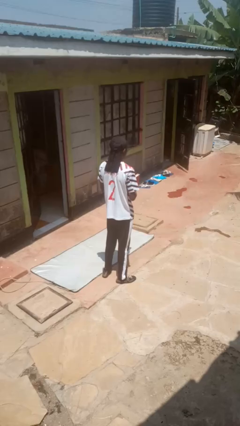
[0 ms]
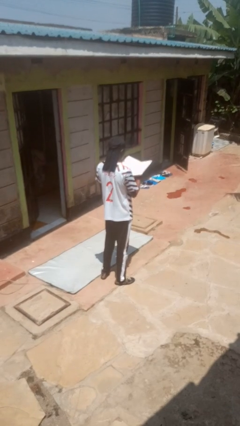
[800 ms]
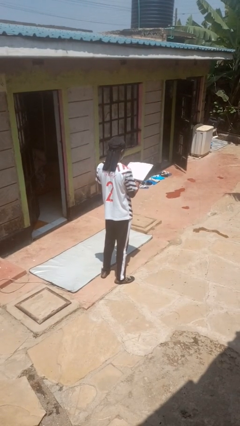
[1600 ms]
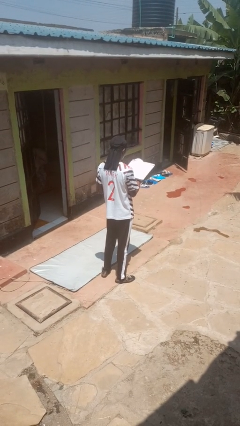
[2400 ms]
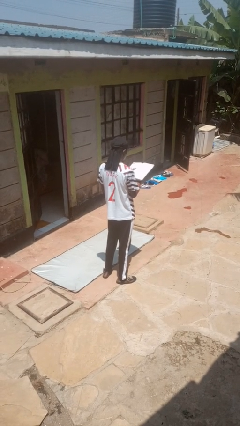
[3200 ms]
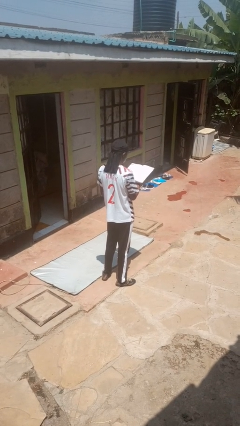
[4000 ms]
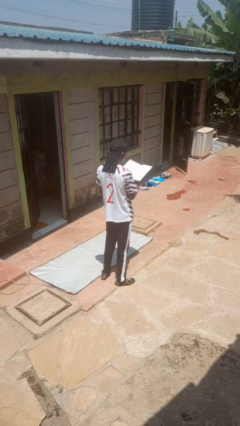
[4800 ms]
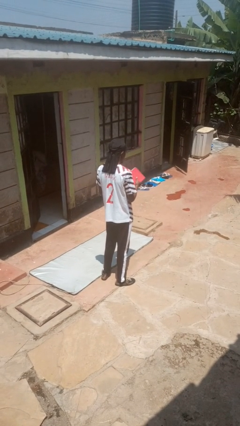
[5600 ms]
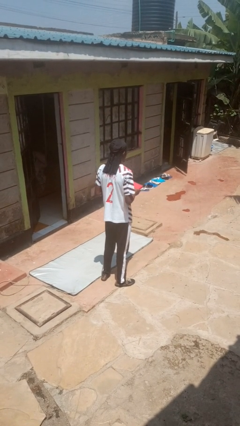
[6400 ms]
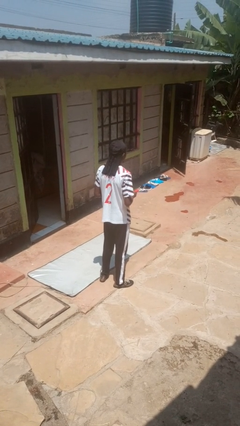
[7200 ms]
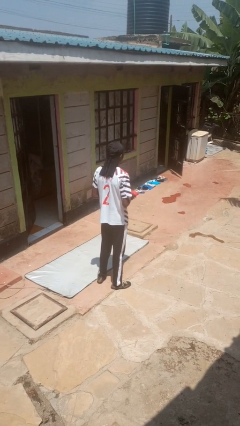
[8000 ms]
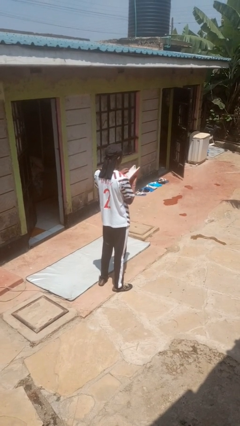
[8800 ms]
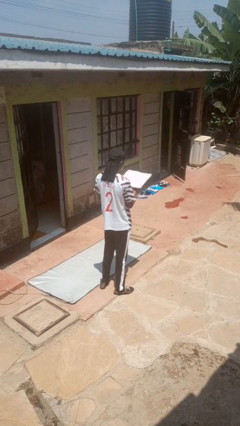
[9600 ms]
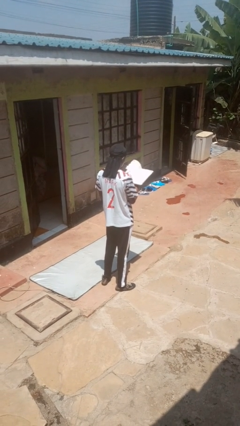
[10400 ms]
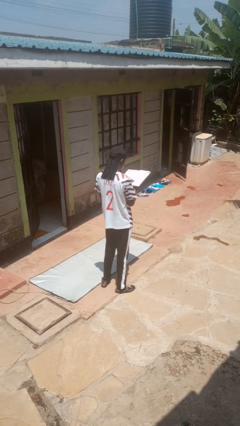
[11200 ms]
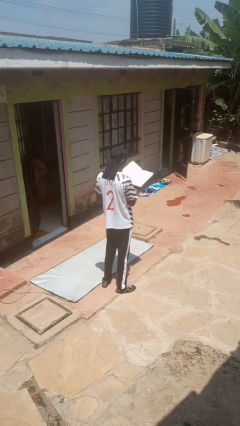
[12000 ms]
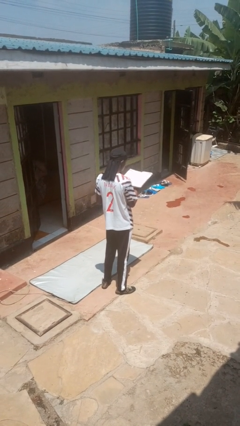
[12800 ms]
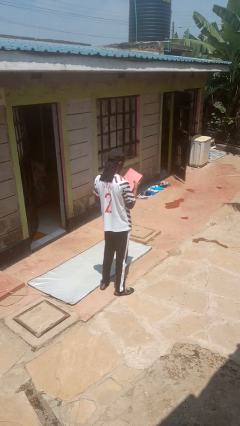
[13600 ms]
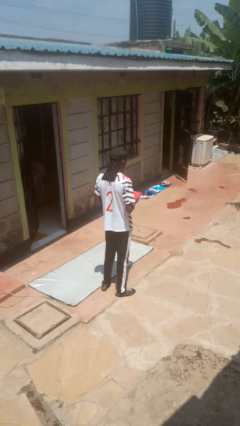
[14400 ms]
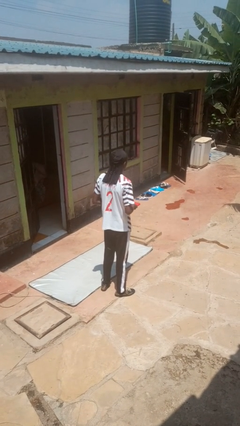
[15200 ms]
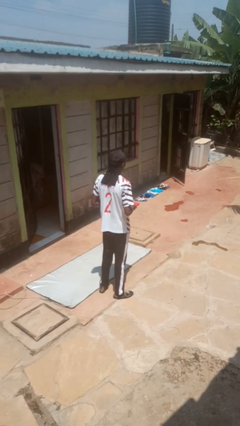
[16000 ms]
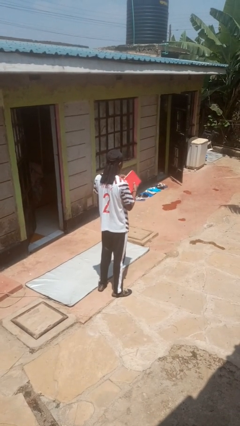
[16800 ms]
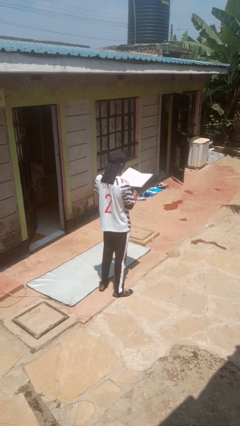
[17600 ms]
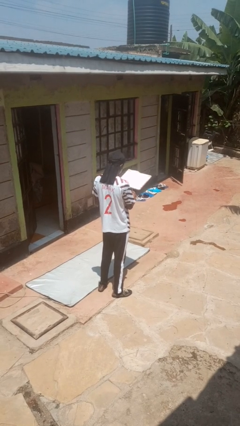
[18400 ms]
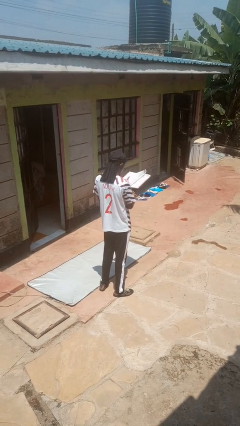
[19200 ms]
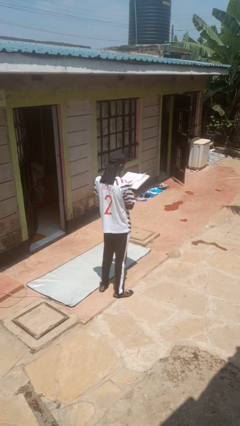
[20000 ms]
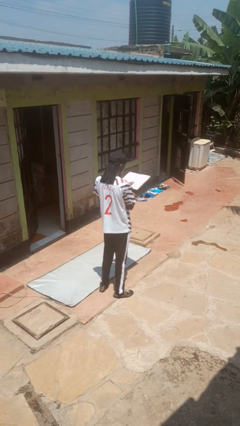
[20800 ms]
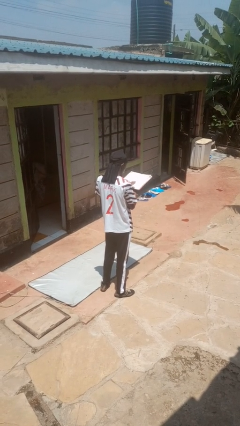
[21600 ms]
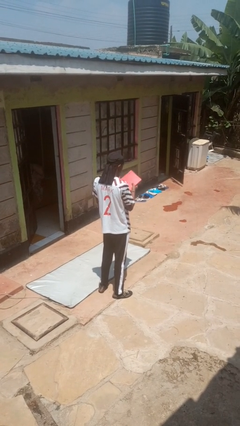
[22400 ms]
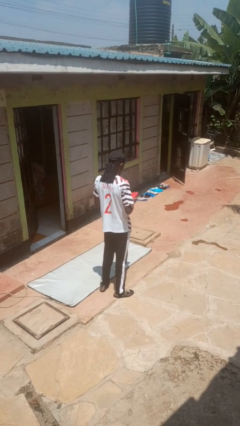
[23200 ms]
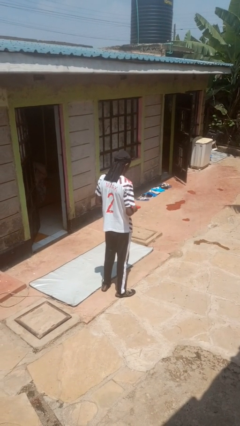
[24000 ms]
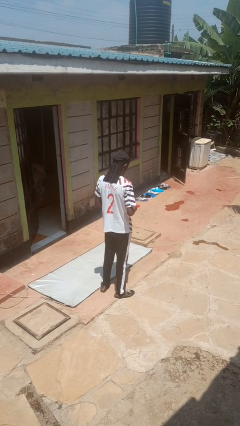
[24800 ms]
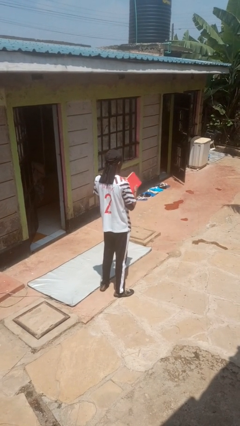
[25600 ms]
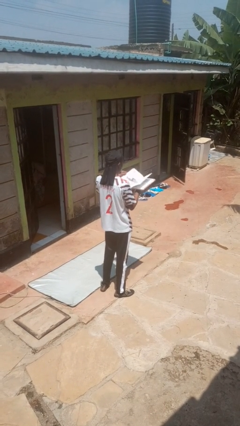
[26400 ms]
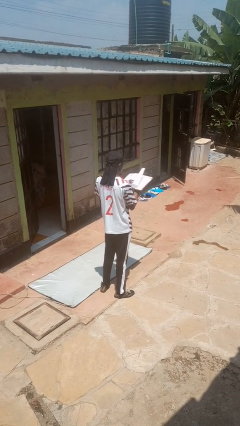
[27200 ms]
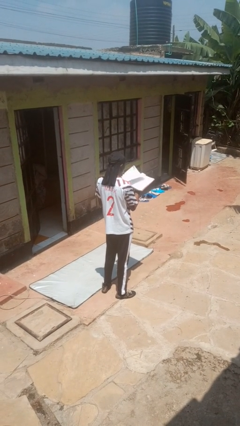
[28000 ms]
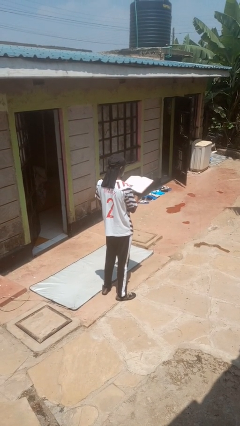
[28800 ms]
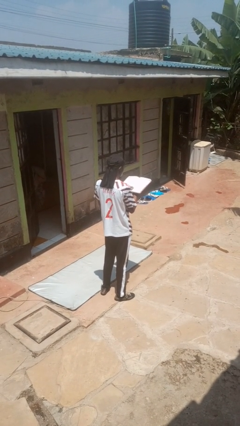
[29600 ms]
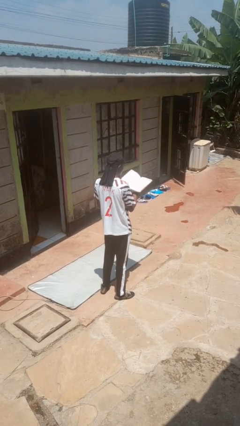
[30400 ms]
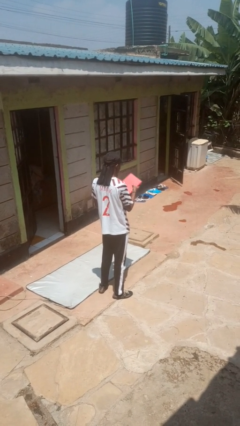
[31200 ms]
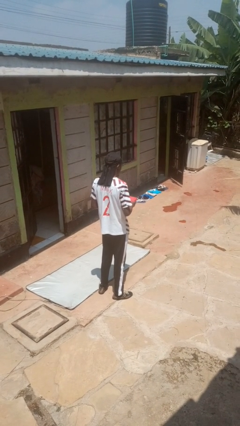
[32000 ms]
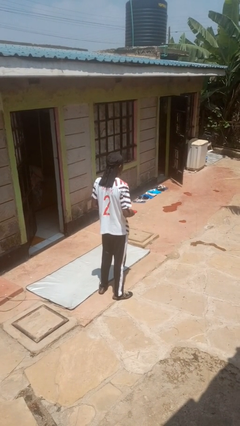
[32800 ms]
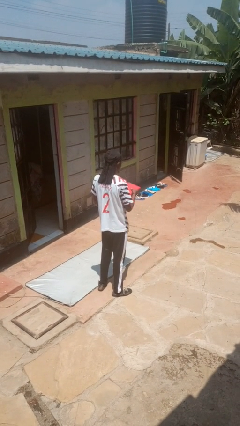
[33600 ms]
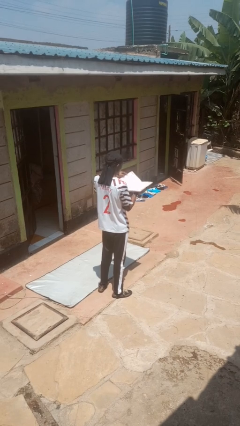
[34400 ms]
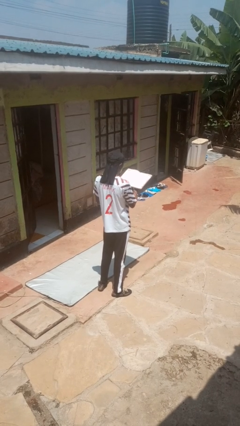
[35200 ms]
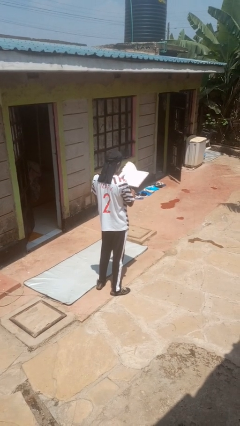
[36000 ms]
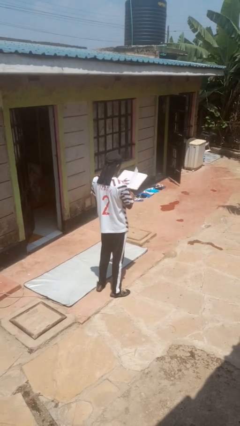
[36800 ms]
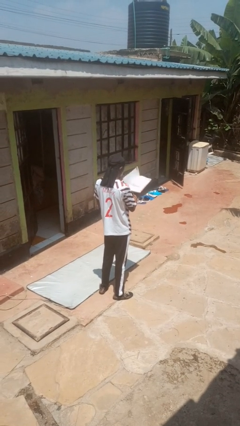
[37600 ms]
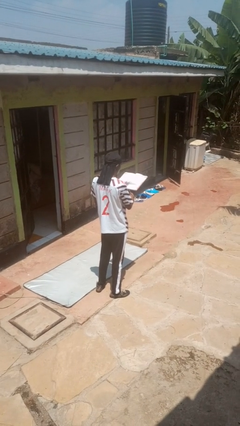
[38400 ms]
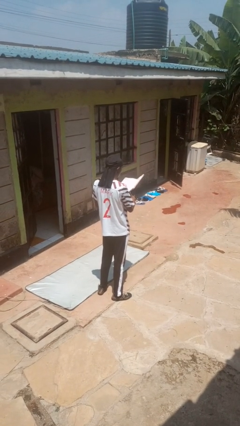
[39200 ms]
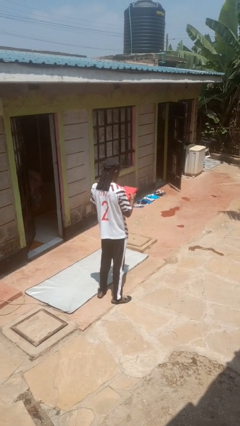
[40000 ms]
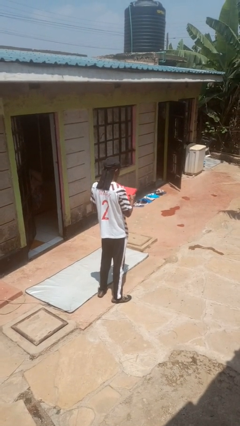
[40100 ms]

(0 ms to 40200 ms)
person reads book

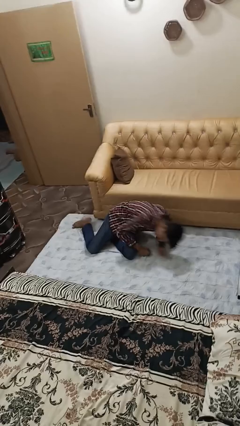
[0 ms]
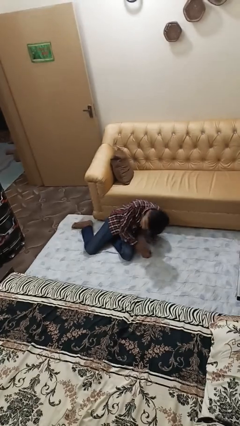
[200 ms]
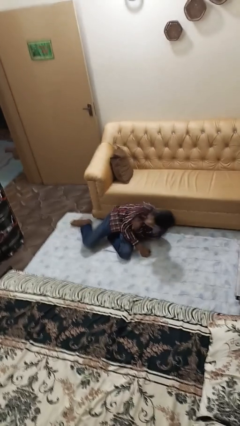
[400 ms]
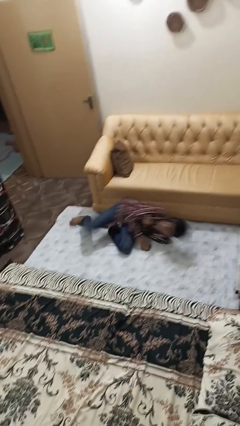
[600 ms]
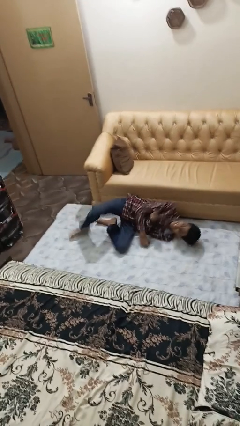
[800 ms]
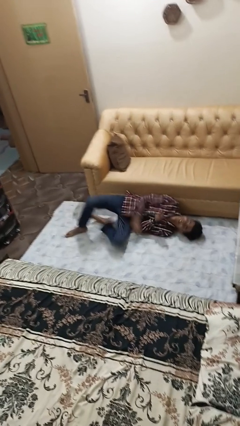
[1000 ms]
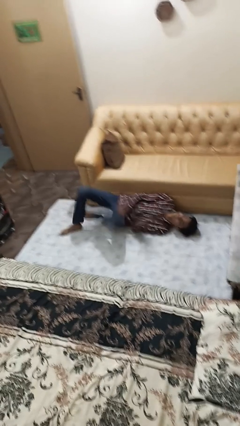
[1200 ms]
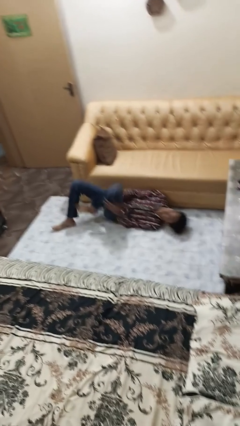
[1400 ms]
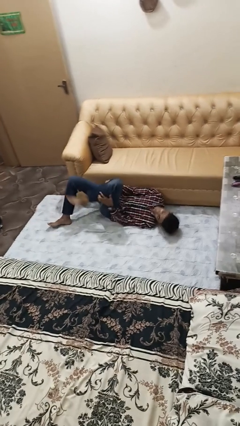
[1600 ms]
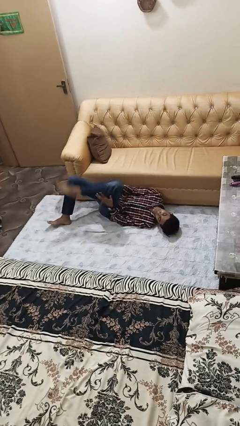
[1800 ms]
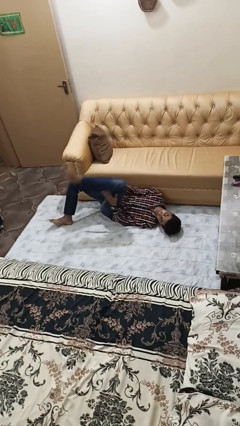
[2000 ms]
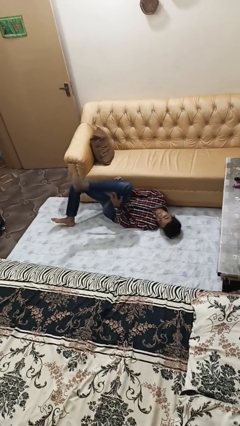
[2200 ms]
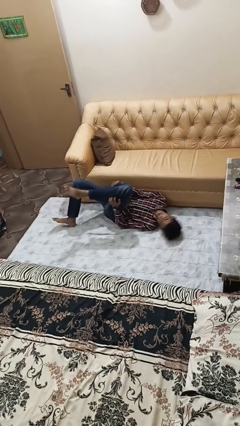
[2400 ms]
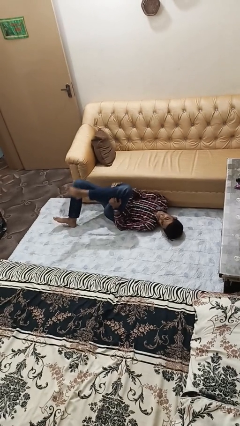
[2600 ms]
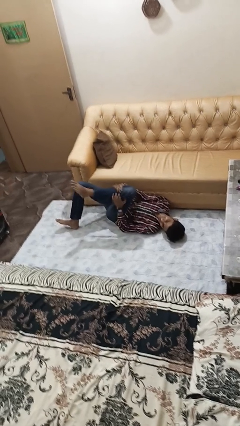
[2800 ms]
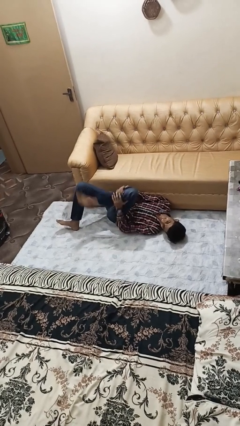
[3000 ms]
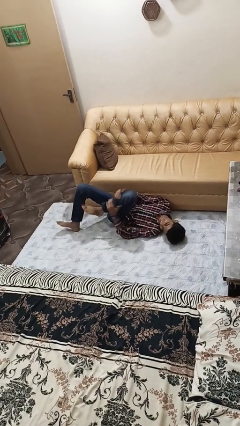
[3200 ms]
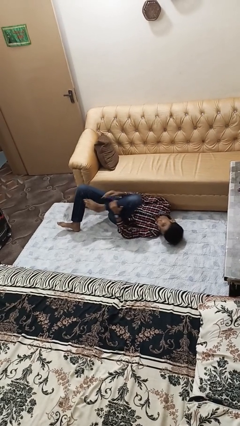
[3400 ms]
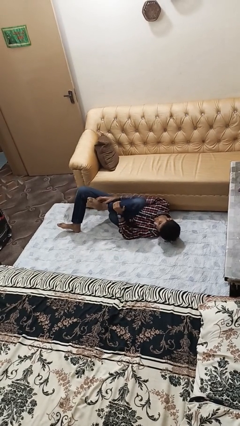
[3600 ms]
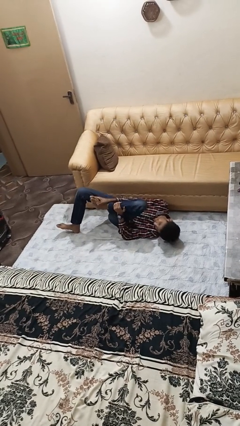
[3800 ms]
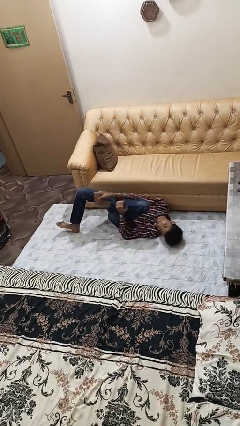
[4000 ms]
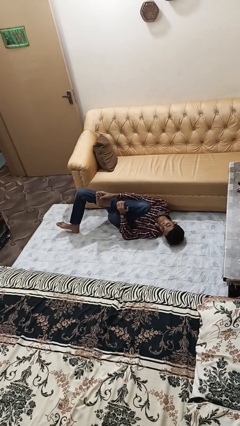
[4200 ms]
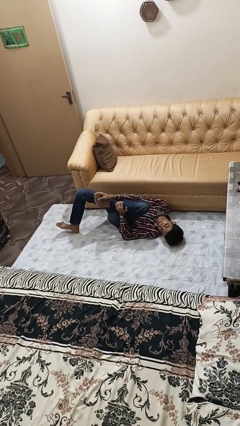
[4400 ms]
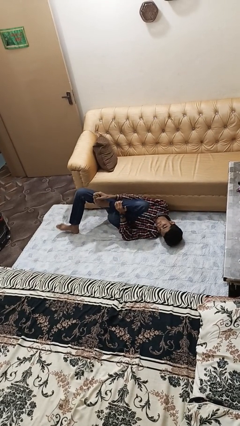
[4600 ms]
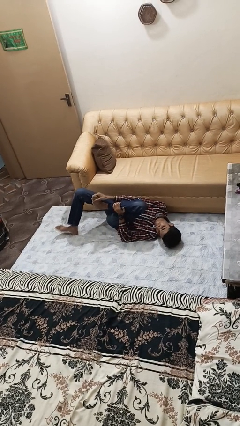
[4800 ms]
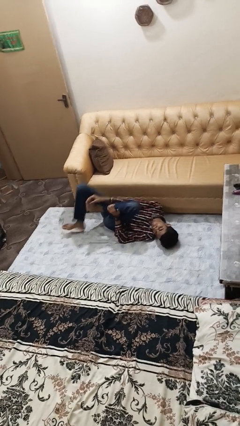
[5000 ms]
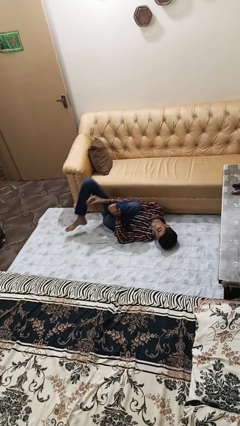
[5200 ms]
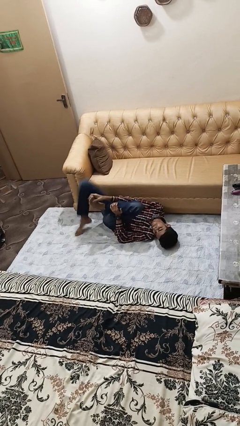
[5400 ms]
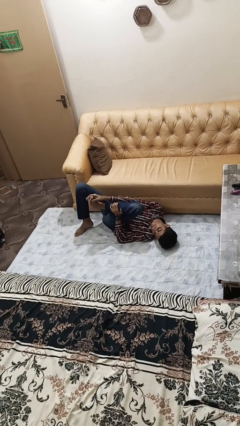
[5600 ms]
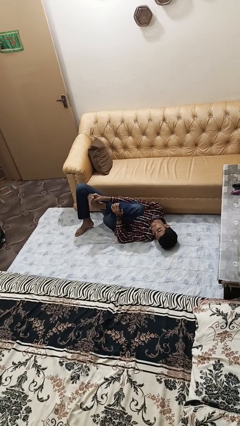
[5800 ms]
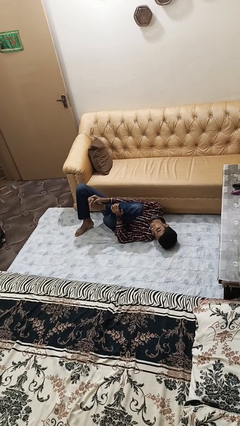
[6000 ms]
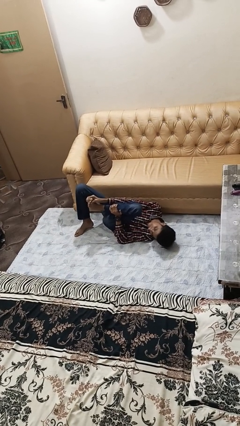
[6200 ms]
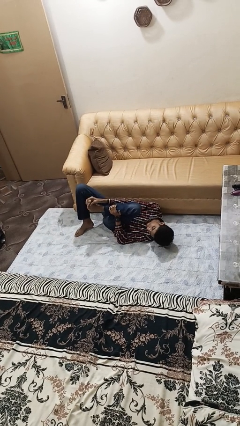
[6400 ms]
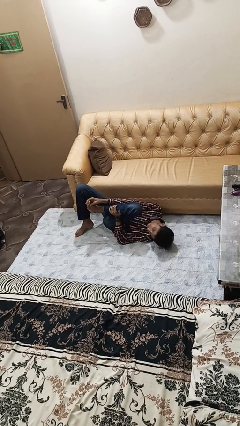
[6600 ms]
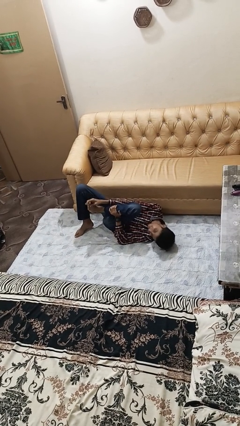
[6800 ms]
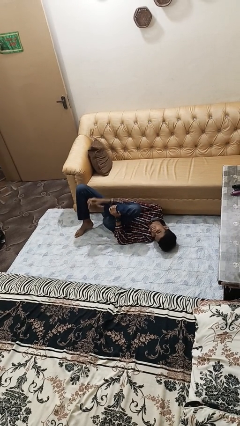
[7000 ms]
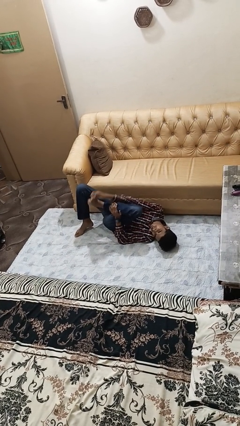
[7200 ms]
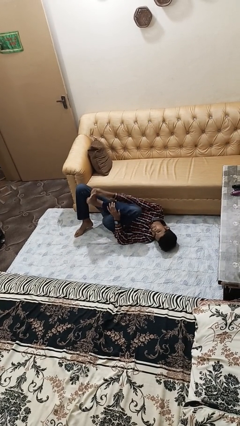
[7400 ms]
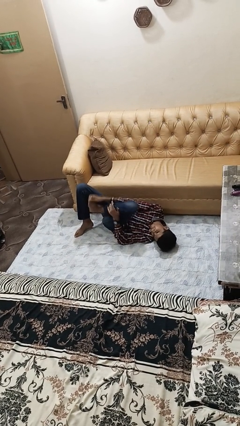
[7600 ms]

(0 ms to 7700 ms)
person lies down on floor

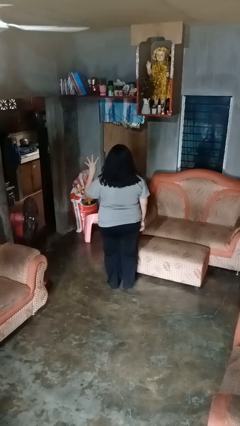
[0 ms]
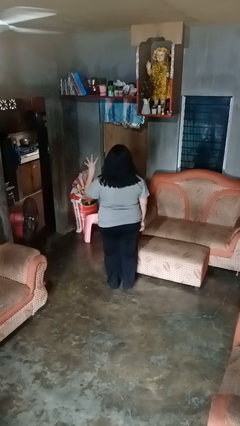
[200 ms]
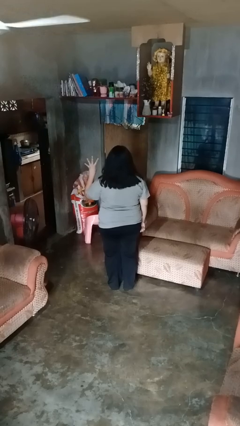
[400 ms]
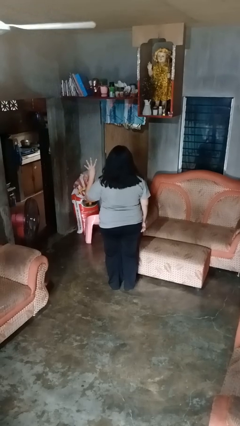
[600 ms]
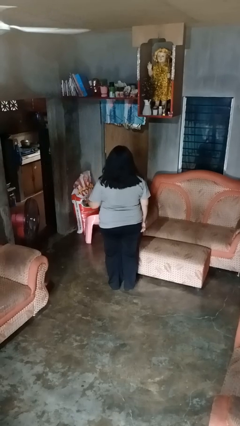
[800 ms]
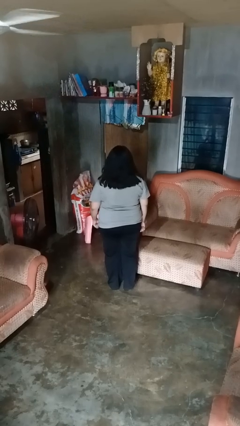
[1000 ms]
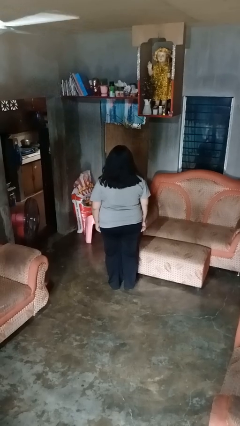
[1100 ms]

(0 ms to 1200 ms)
person gestures number four
